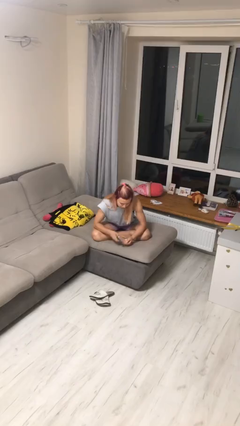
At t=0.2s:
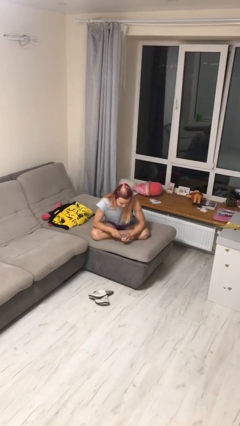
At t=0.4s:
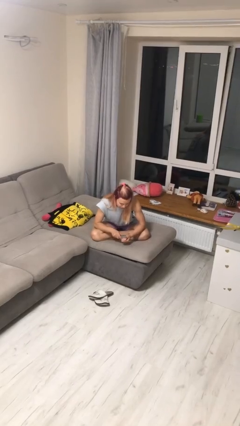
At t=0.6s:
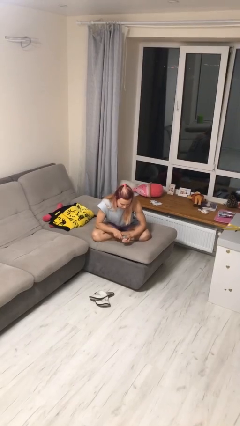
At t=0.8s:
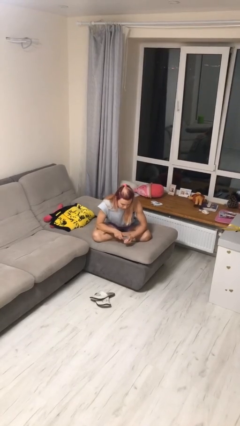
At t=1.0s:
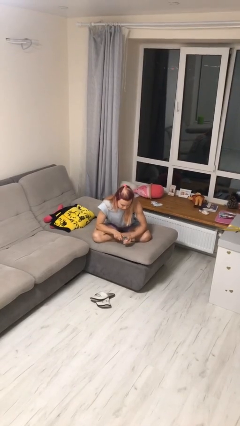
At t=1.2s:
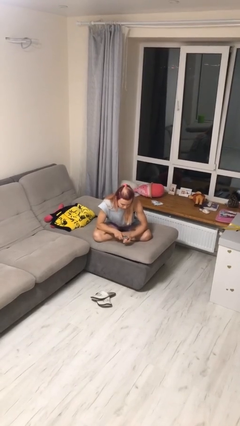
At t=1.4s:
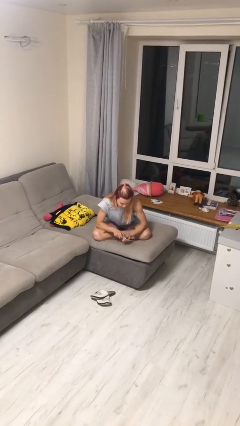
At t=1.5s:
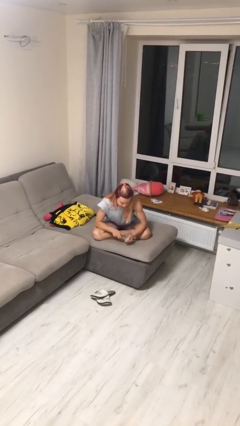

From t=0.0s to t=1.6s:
person files fingernails

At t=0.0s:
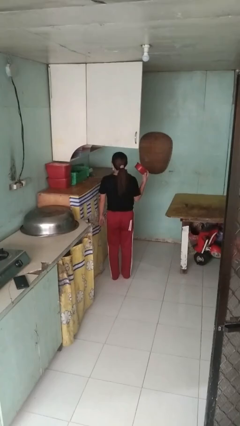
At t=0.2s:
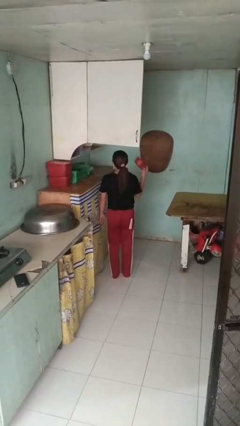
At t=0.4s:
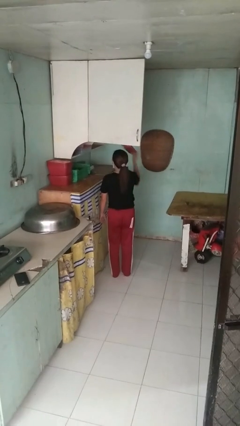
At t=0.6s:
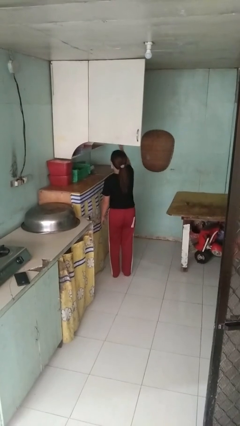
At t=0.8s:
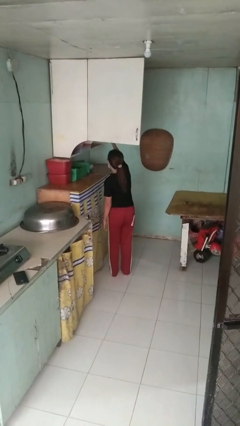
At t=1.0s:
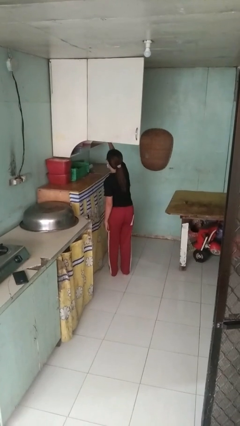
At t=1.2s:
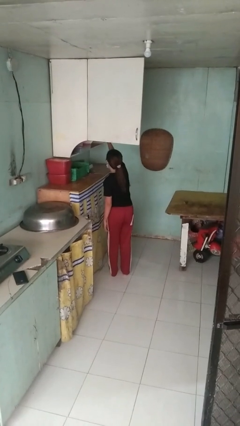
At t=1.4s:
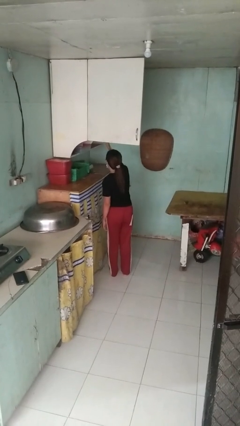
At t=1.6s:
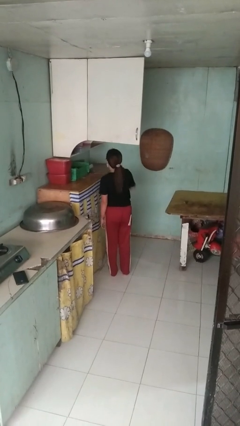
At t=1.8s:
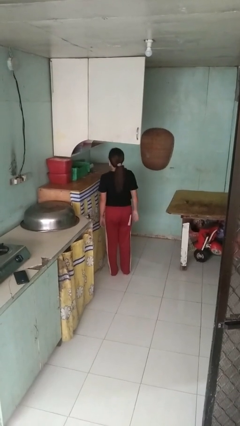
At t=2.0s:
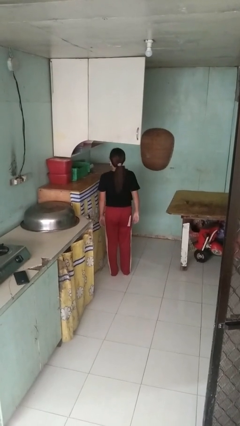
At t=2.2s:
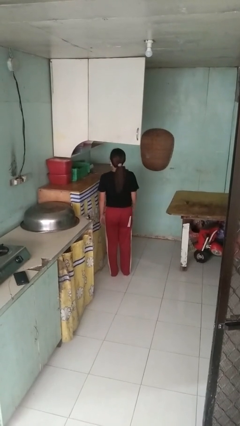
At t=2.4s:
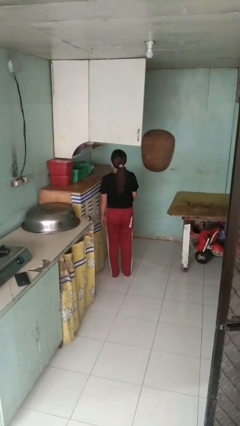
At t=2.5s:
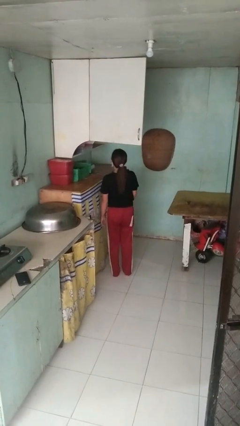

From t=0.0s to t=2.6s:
person puts object in cabinet

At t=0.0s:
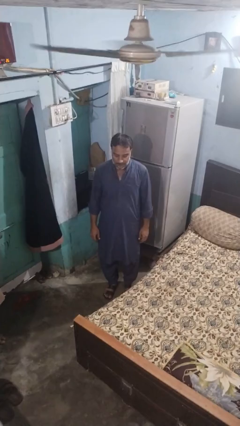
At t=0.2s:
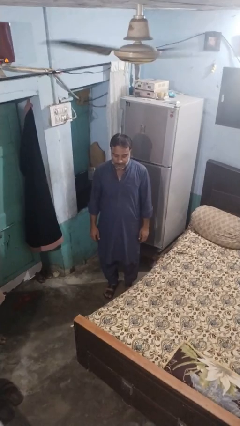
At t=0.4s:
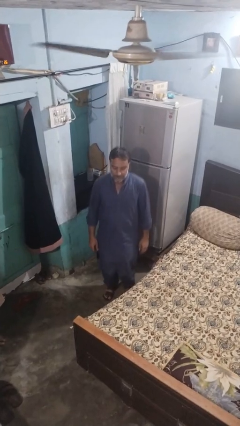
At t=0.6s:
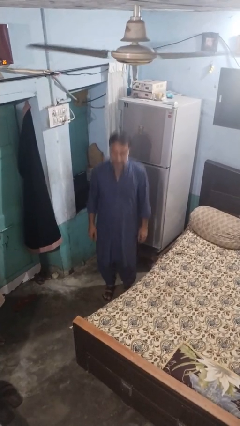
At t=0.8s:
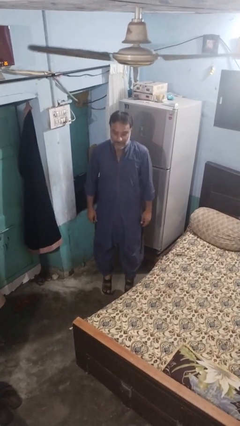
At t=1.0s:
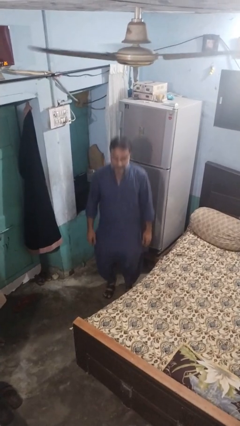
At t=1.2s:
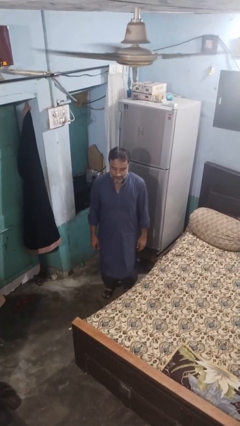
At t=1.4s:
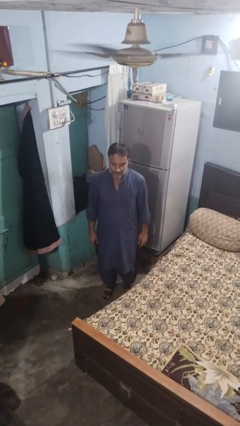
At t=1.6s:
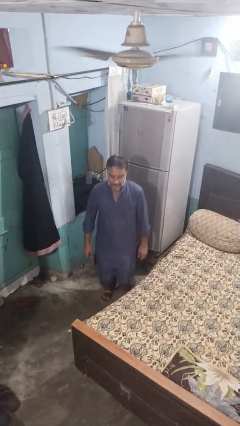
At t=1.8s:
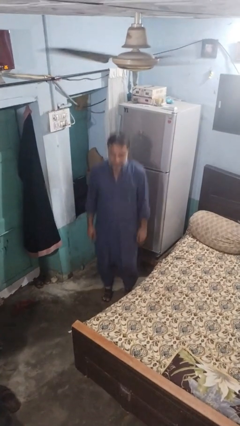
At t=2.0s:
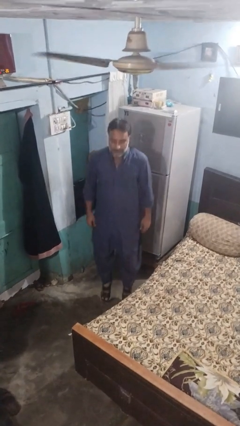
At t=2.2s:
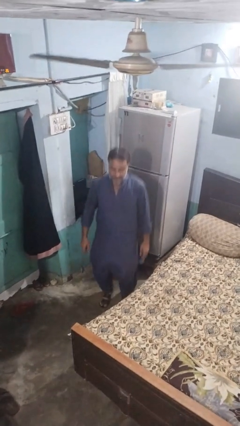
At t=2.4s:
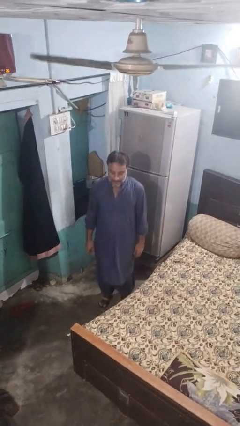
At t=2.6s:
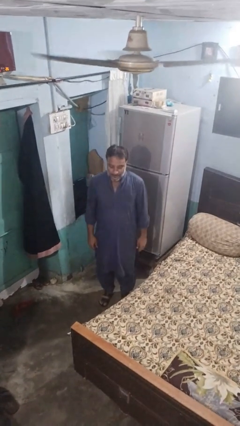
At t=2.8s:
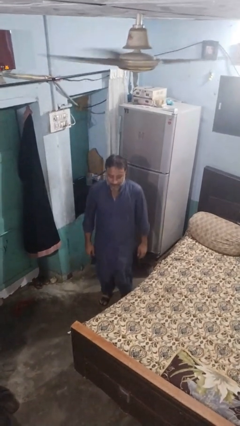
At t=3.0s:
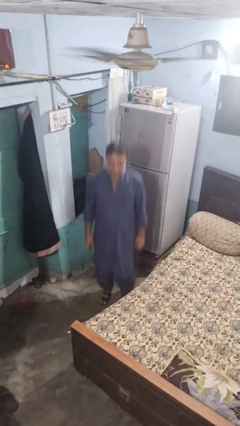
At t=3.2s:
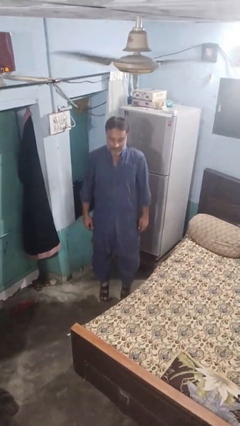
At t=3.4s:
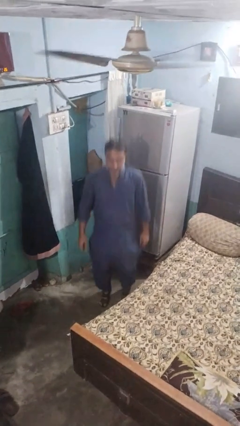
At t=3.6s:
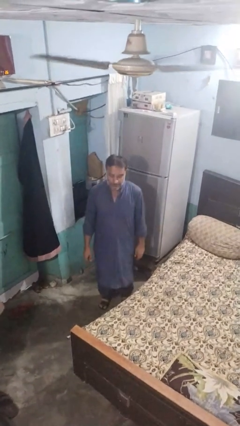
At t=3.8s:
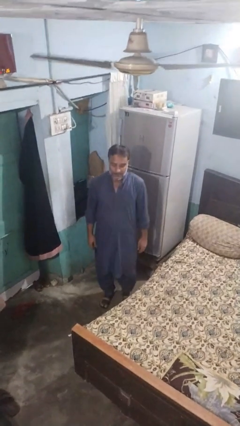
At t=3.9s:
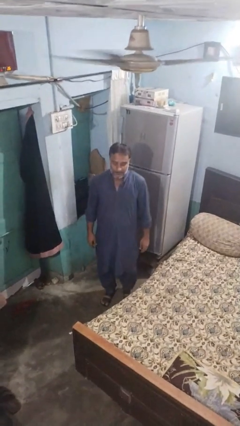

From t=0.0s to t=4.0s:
person jumps

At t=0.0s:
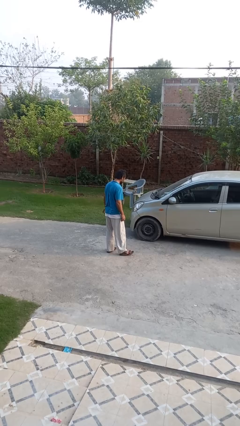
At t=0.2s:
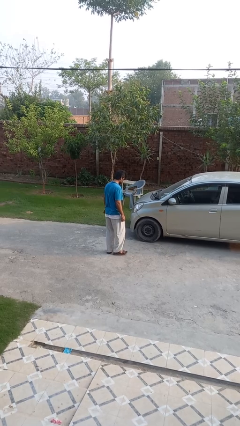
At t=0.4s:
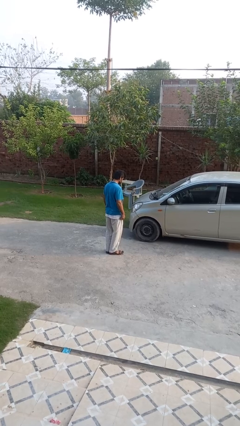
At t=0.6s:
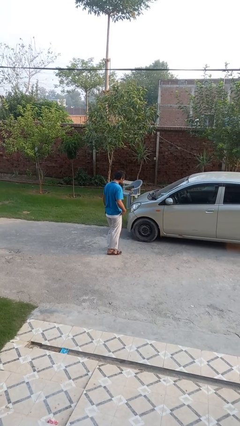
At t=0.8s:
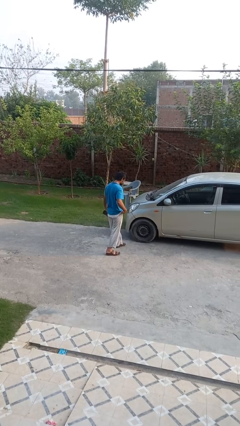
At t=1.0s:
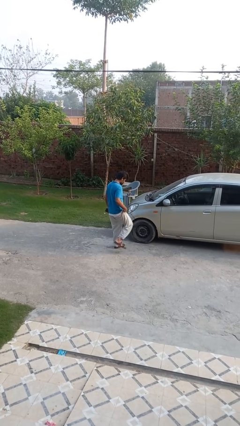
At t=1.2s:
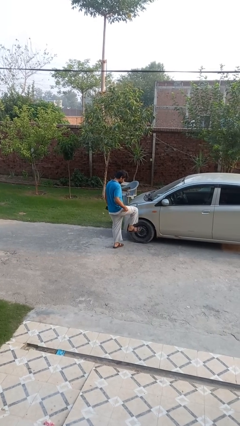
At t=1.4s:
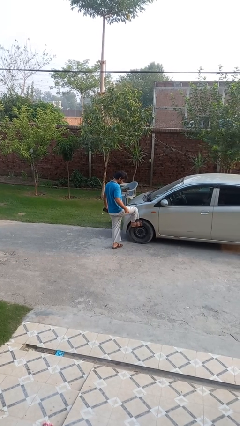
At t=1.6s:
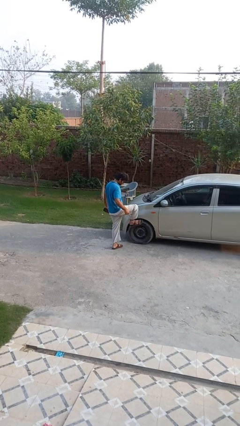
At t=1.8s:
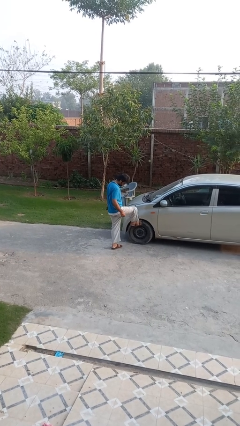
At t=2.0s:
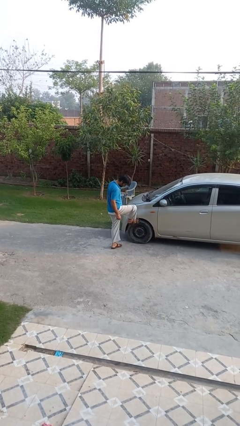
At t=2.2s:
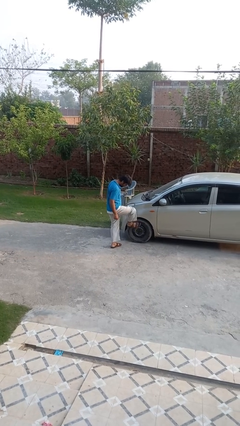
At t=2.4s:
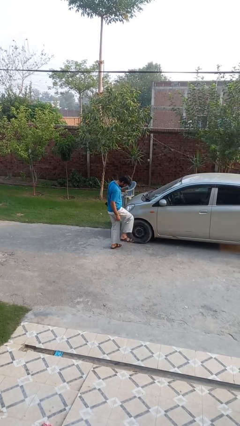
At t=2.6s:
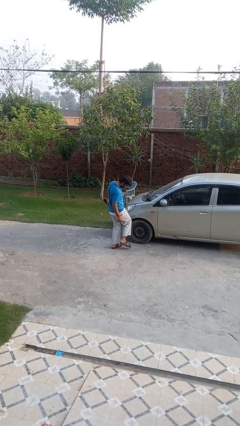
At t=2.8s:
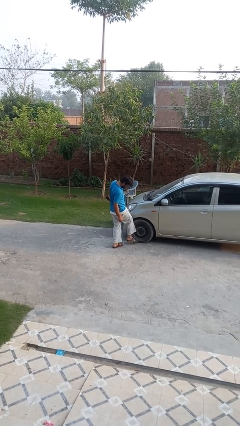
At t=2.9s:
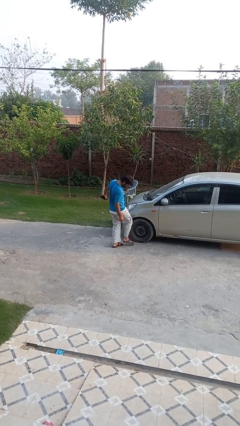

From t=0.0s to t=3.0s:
person kicks car tires

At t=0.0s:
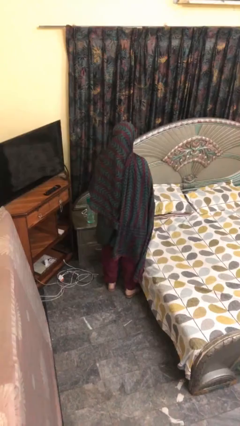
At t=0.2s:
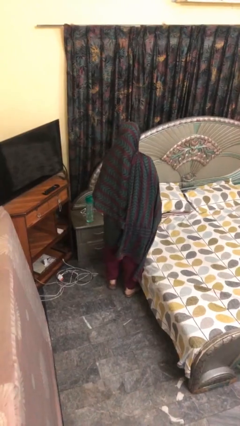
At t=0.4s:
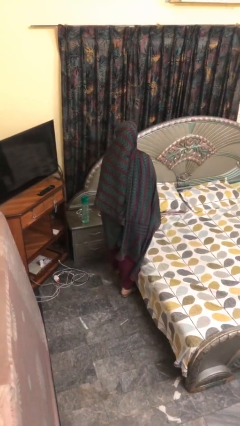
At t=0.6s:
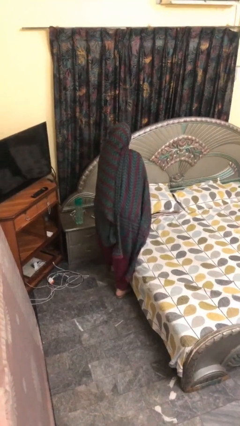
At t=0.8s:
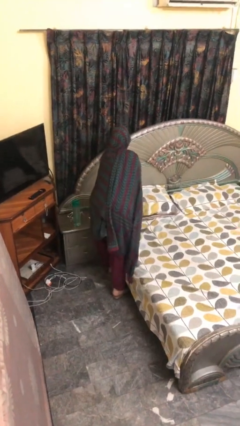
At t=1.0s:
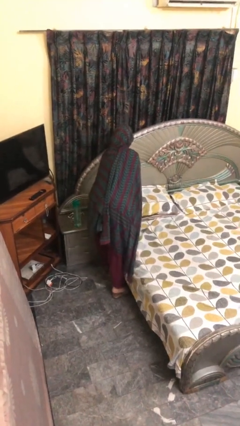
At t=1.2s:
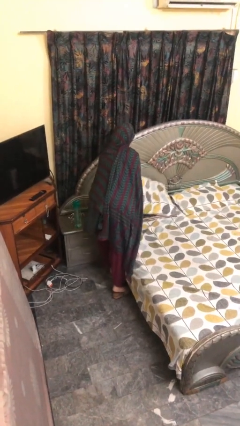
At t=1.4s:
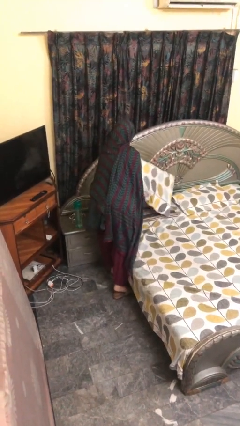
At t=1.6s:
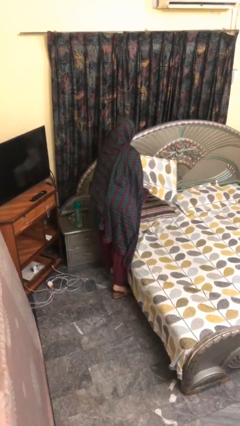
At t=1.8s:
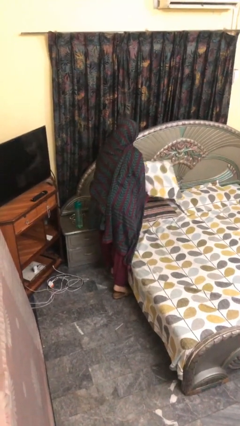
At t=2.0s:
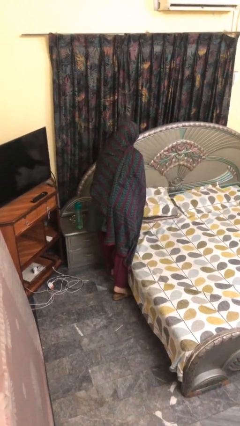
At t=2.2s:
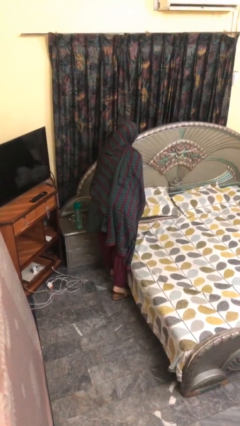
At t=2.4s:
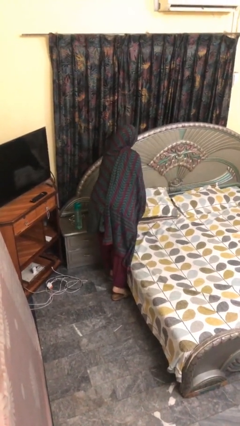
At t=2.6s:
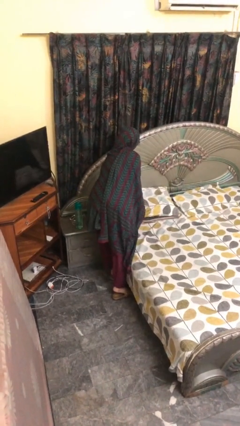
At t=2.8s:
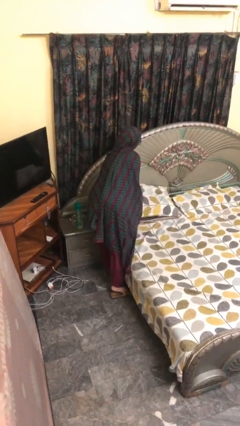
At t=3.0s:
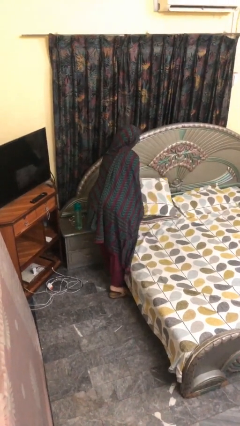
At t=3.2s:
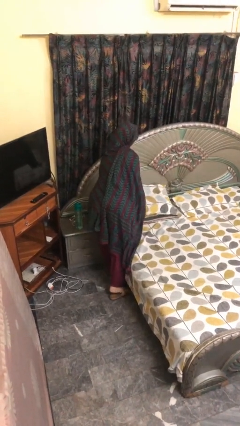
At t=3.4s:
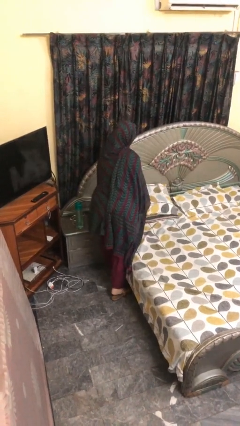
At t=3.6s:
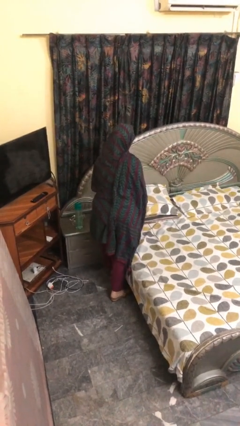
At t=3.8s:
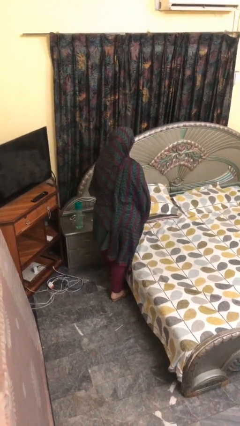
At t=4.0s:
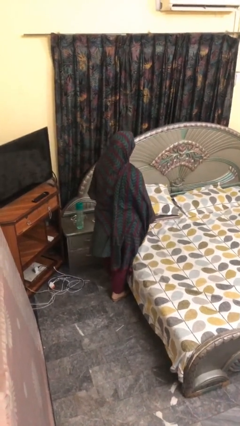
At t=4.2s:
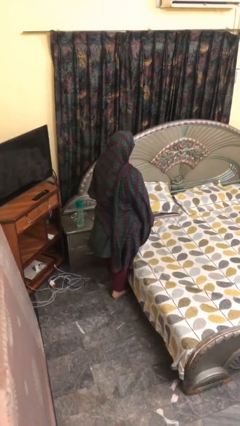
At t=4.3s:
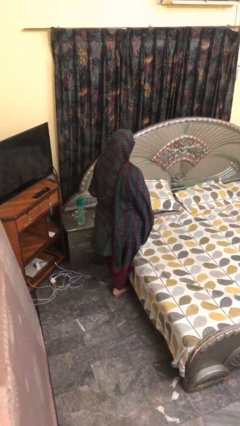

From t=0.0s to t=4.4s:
person makes bed

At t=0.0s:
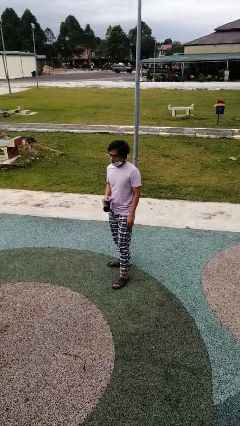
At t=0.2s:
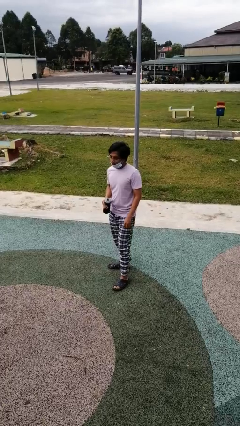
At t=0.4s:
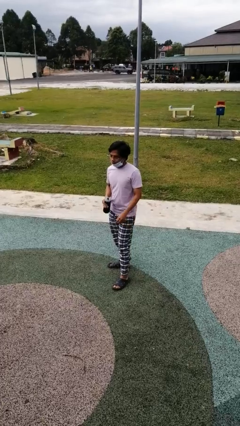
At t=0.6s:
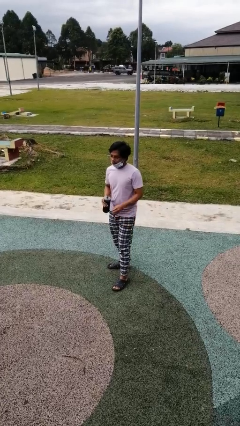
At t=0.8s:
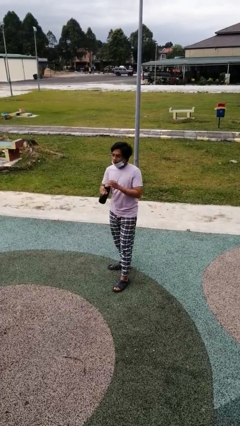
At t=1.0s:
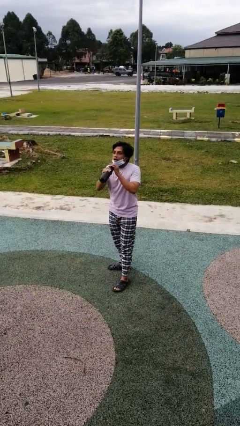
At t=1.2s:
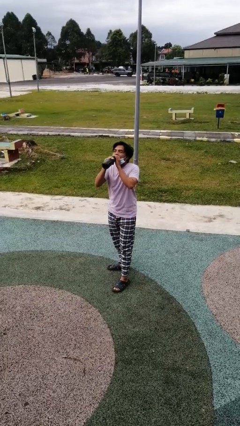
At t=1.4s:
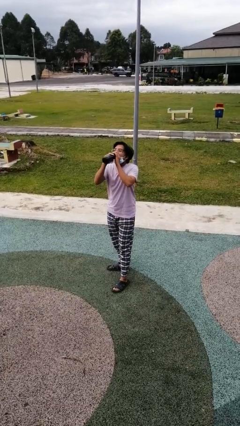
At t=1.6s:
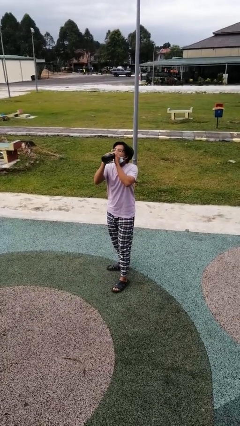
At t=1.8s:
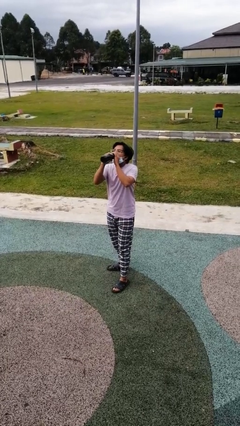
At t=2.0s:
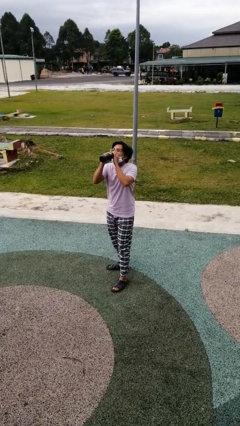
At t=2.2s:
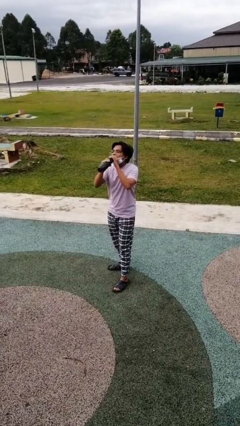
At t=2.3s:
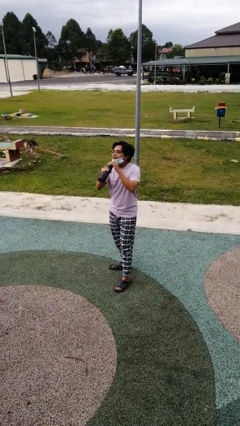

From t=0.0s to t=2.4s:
person drinks from bottle
